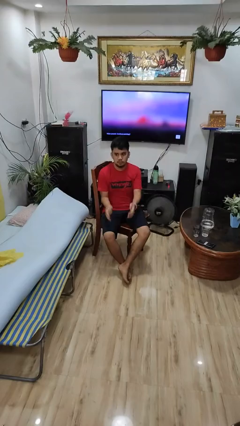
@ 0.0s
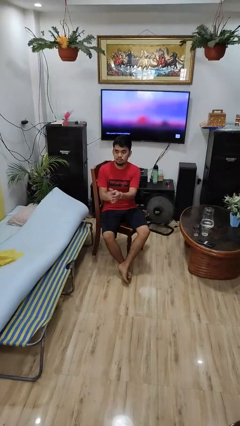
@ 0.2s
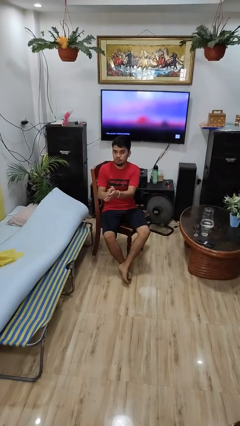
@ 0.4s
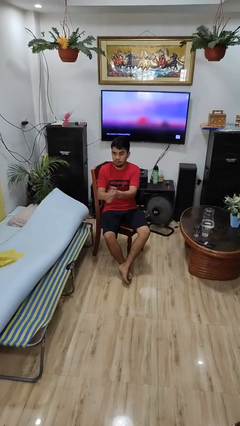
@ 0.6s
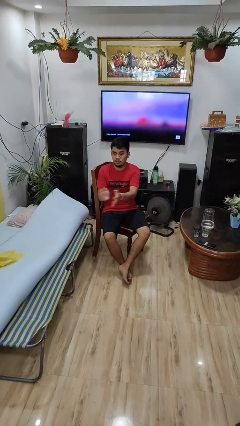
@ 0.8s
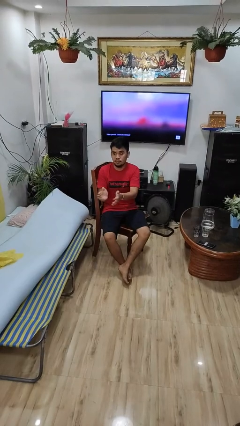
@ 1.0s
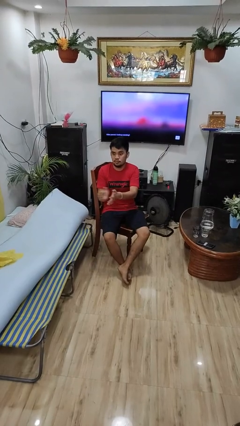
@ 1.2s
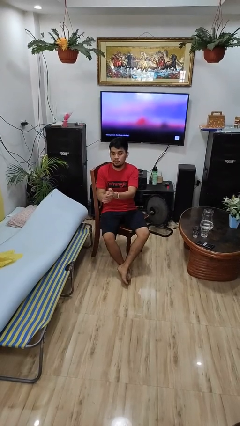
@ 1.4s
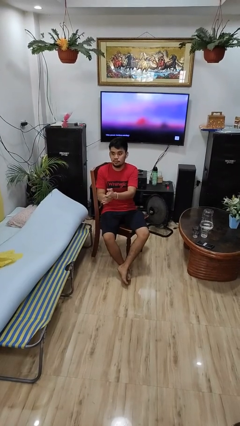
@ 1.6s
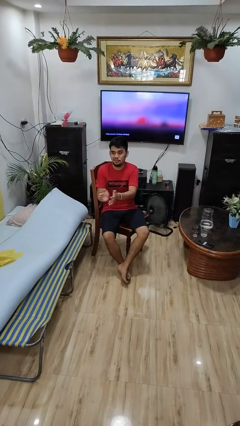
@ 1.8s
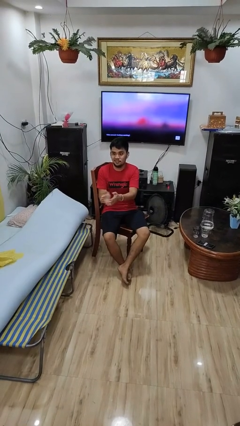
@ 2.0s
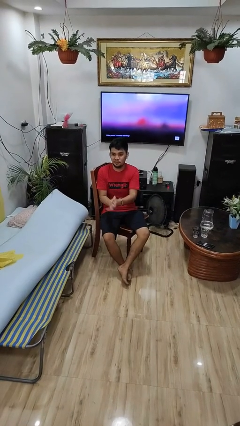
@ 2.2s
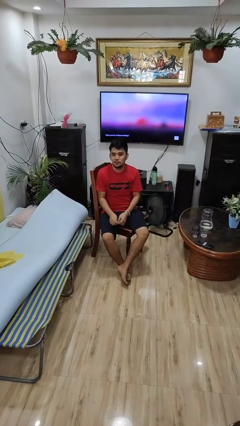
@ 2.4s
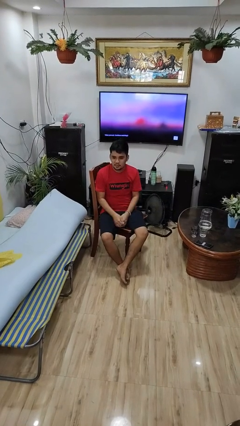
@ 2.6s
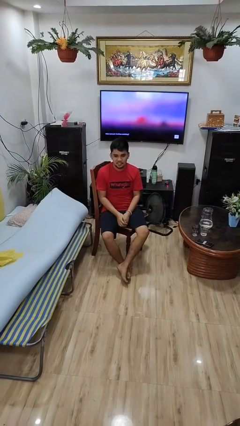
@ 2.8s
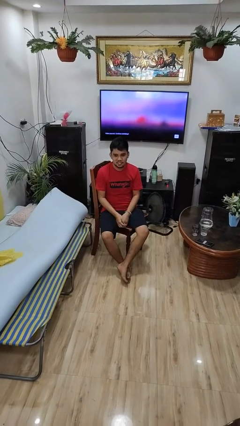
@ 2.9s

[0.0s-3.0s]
person claps hands

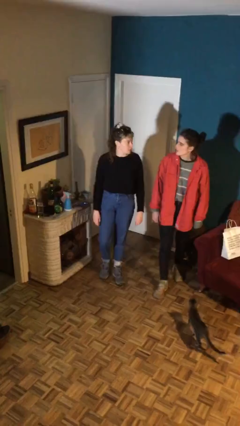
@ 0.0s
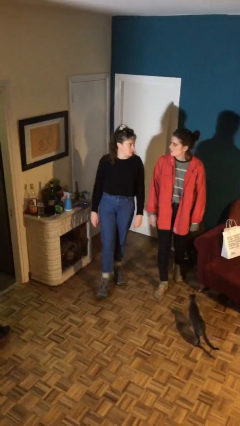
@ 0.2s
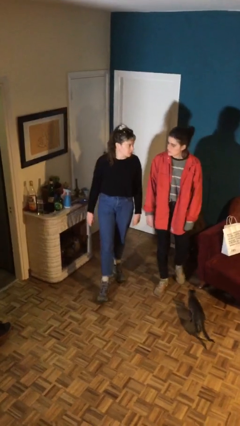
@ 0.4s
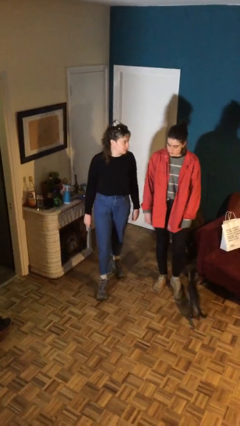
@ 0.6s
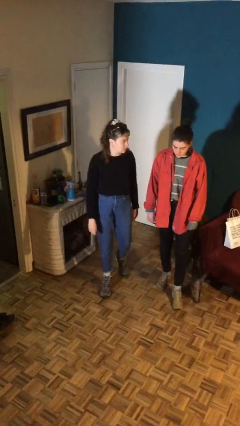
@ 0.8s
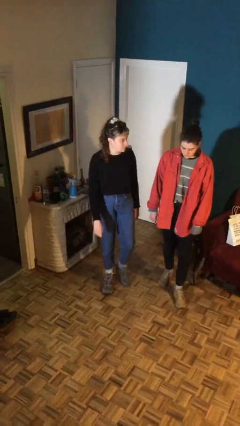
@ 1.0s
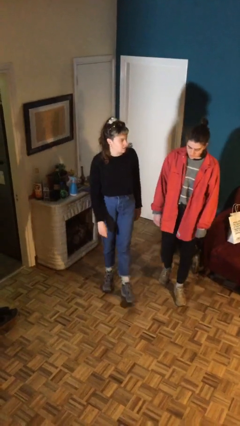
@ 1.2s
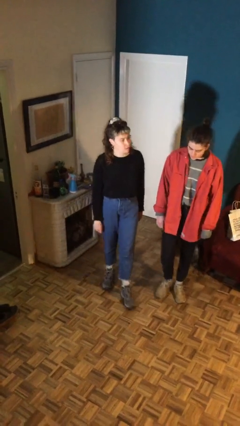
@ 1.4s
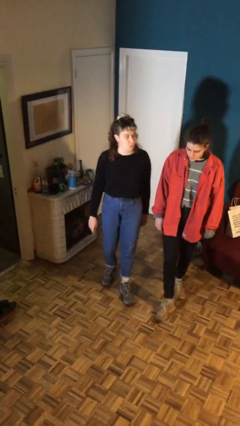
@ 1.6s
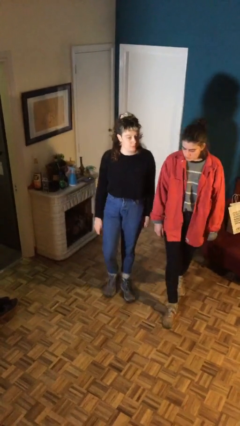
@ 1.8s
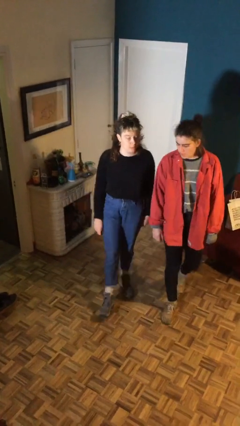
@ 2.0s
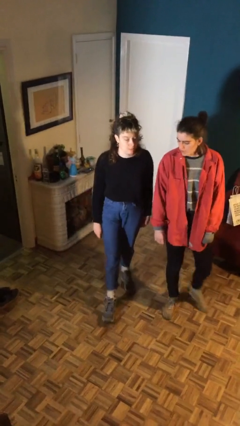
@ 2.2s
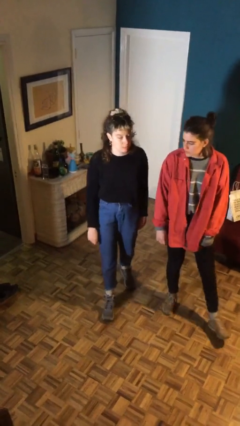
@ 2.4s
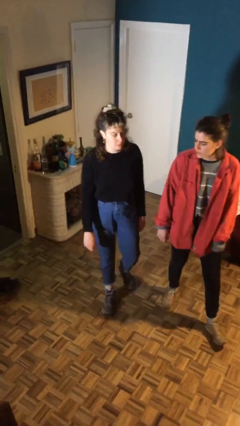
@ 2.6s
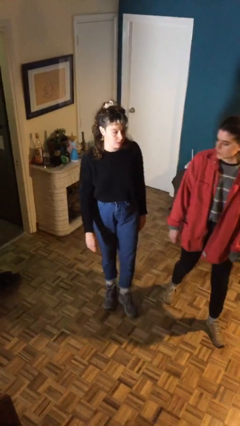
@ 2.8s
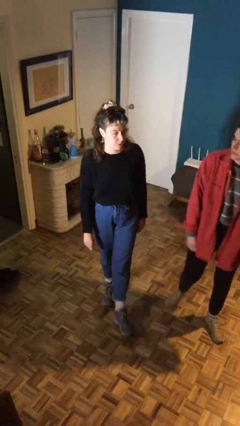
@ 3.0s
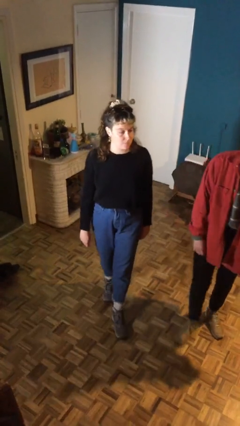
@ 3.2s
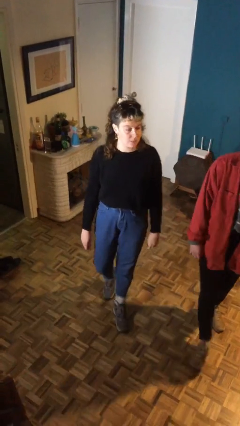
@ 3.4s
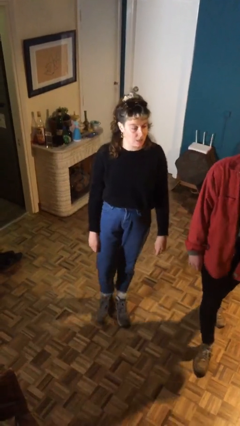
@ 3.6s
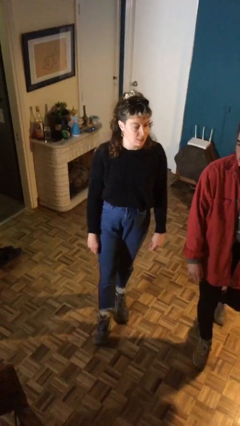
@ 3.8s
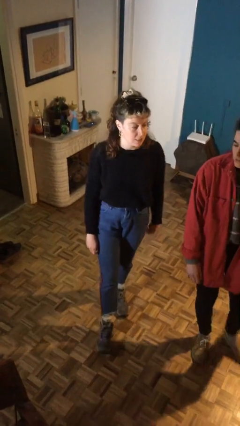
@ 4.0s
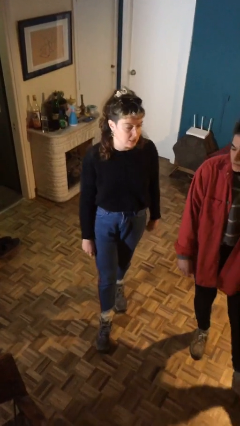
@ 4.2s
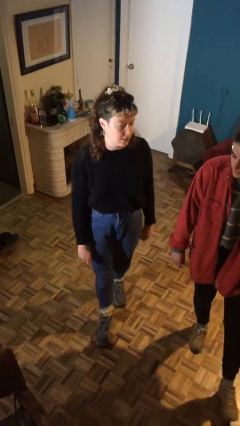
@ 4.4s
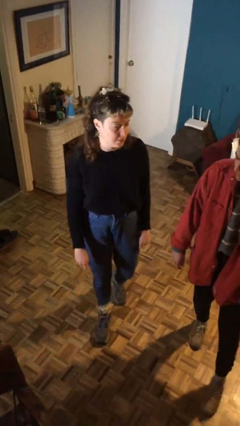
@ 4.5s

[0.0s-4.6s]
person talks to person

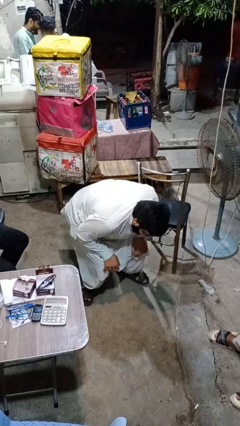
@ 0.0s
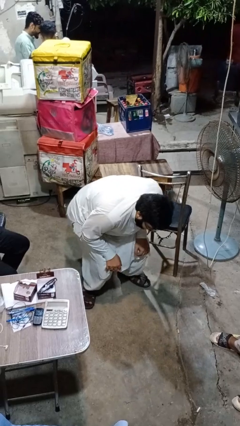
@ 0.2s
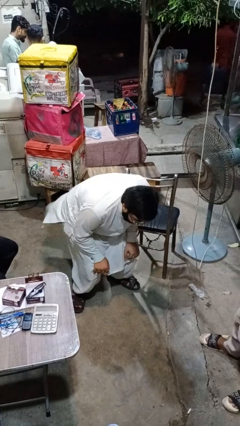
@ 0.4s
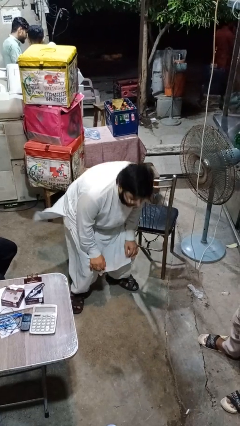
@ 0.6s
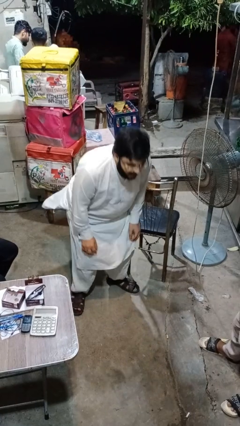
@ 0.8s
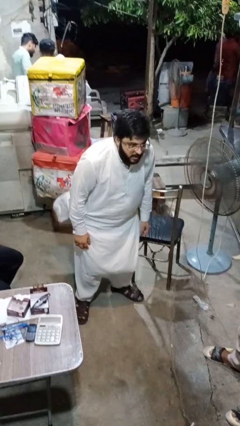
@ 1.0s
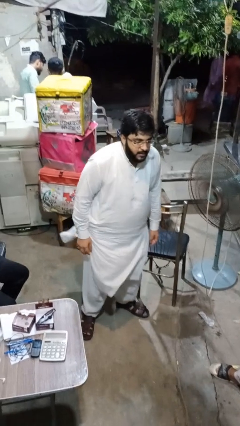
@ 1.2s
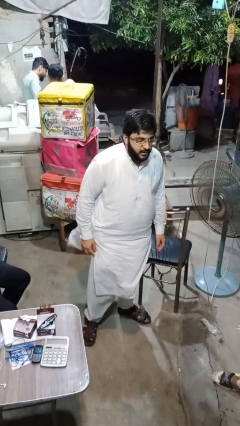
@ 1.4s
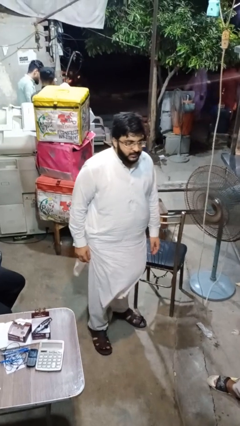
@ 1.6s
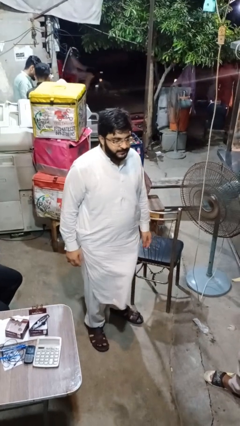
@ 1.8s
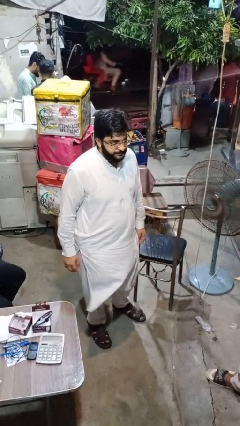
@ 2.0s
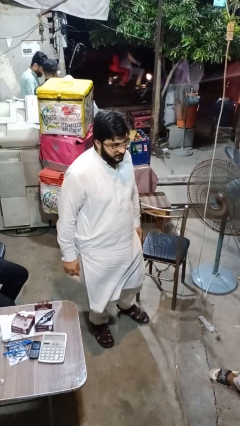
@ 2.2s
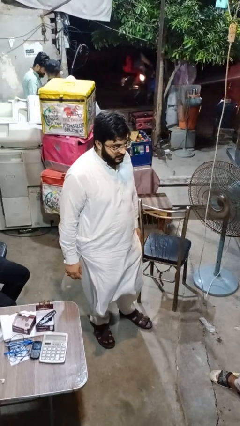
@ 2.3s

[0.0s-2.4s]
person stands up from floor

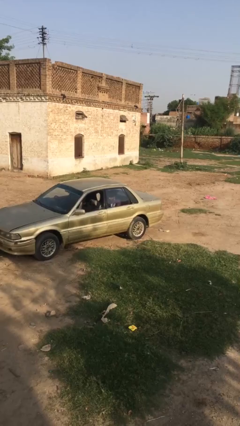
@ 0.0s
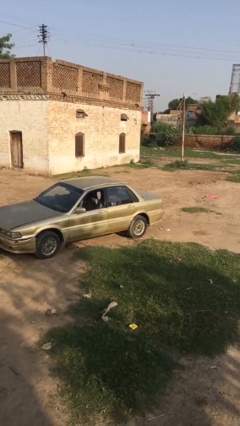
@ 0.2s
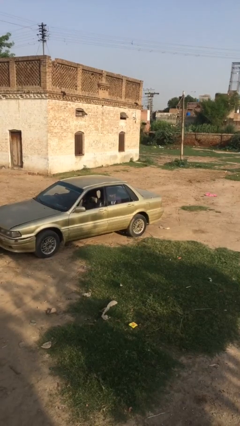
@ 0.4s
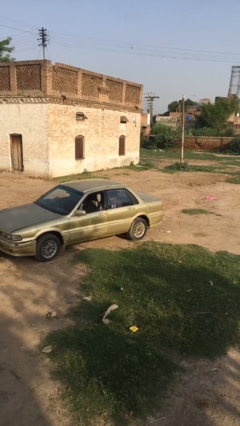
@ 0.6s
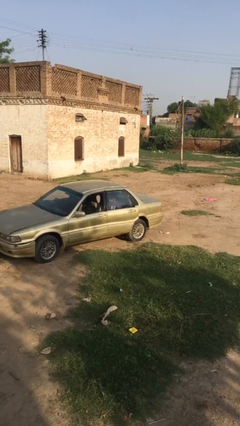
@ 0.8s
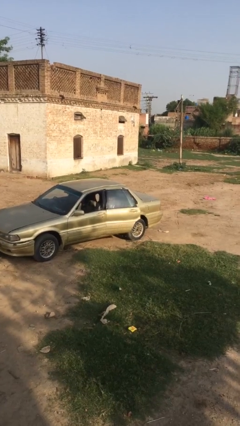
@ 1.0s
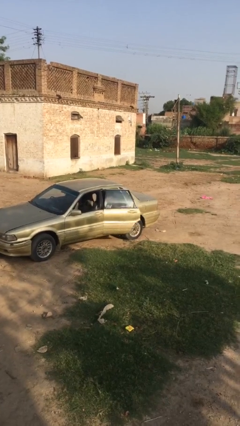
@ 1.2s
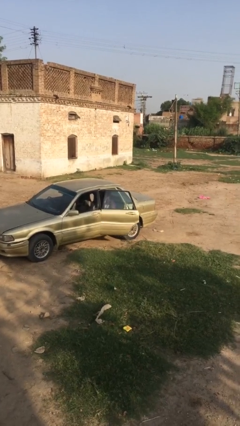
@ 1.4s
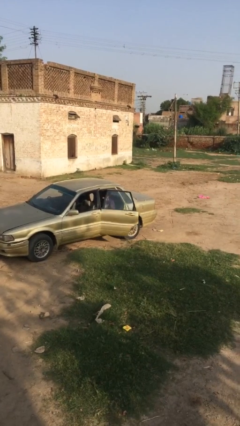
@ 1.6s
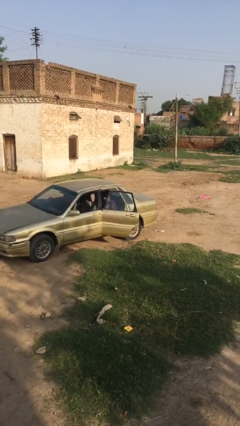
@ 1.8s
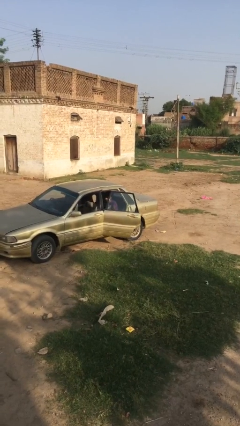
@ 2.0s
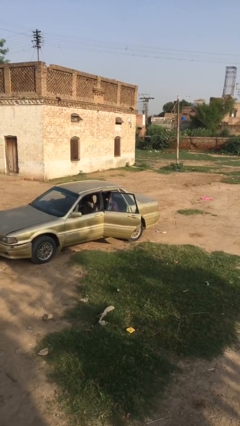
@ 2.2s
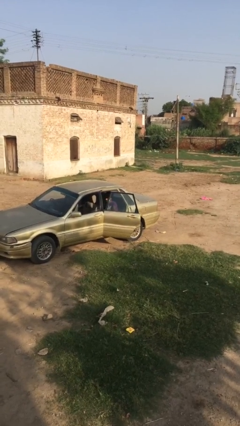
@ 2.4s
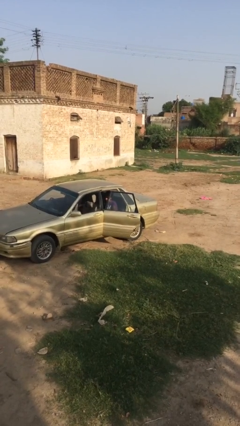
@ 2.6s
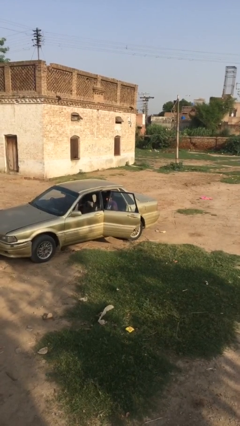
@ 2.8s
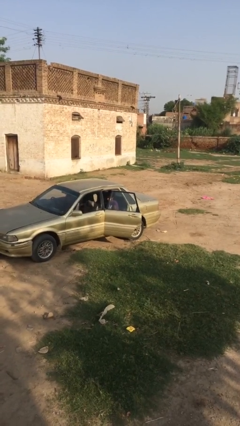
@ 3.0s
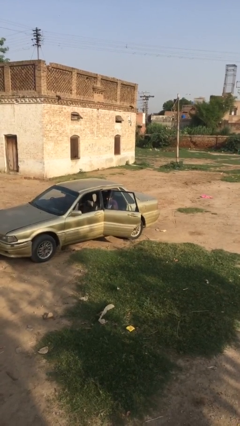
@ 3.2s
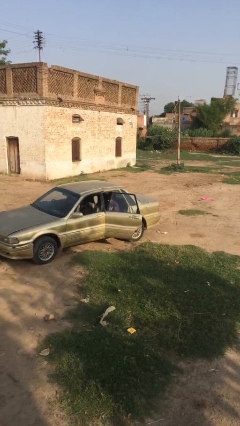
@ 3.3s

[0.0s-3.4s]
person opens car door

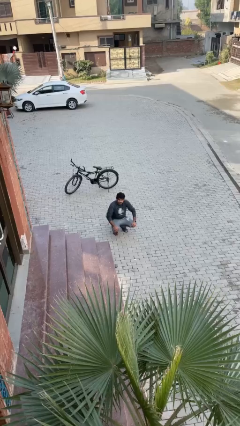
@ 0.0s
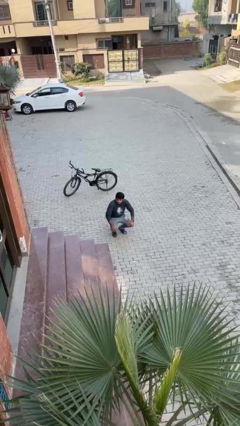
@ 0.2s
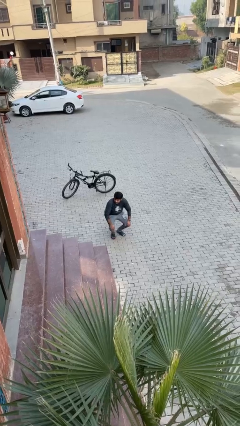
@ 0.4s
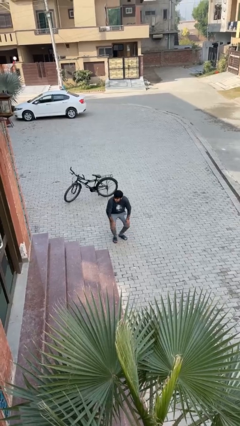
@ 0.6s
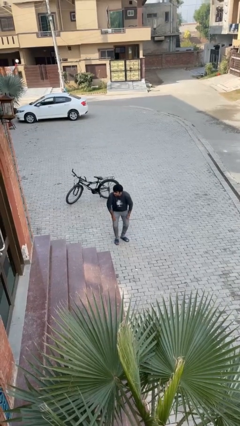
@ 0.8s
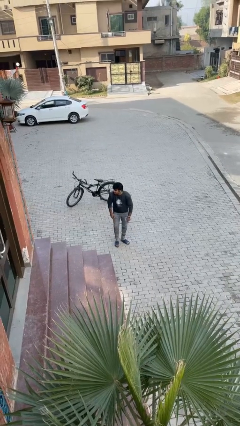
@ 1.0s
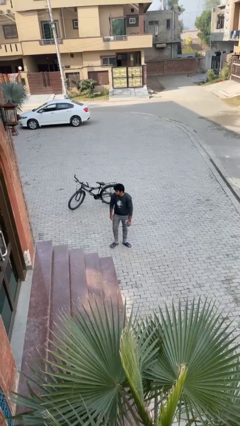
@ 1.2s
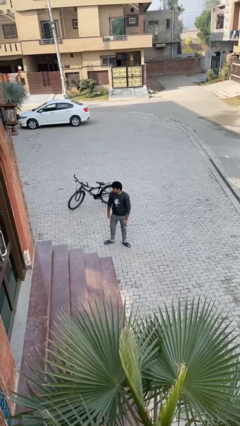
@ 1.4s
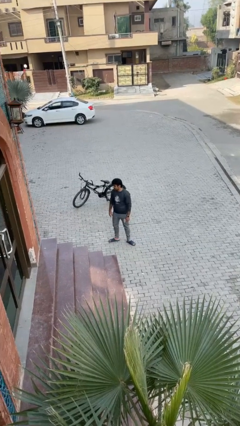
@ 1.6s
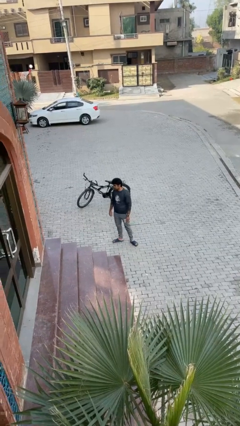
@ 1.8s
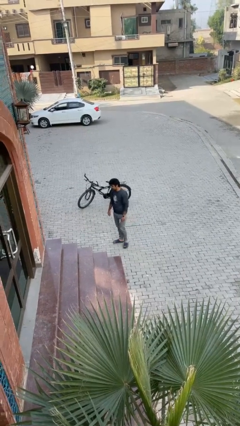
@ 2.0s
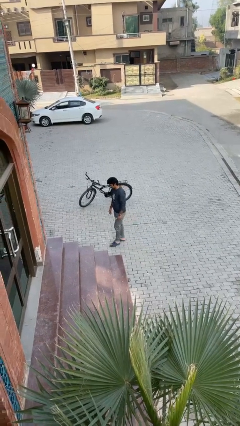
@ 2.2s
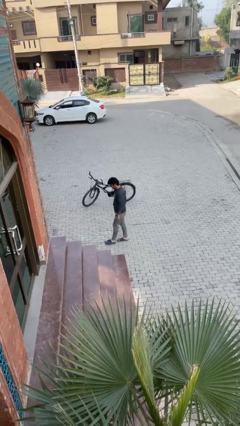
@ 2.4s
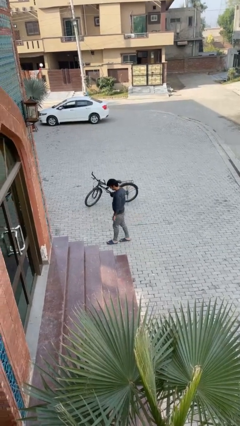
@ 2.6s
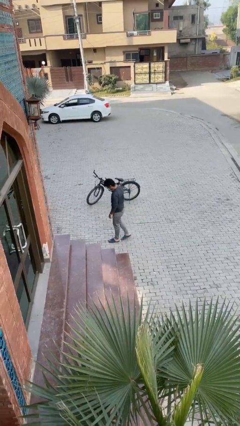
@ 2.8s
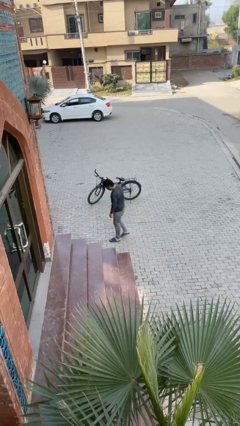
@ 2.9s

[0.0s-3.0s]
person stands up

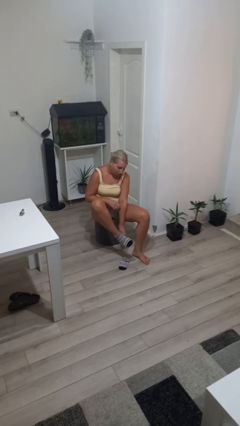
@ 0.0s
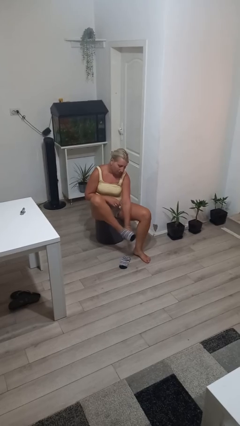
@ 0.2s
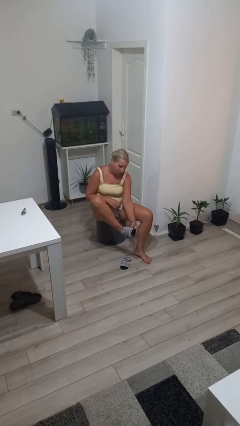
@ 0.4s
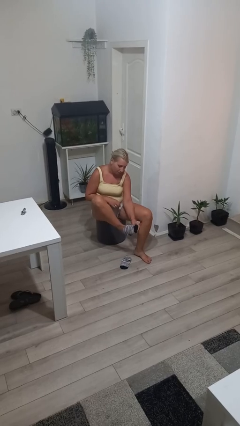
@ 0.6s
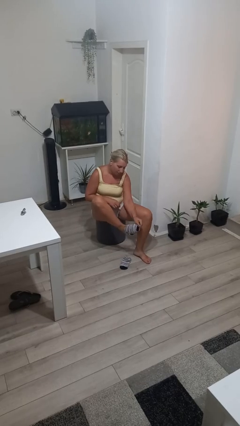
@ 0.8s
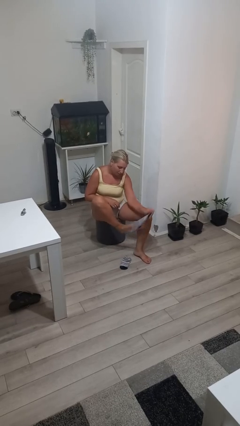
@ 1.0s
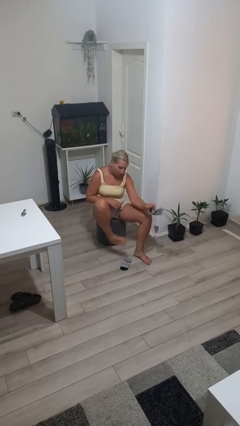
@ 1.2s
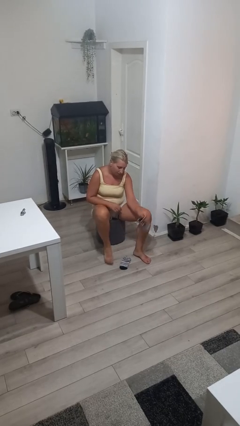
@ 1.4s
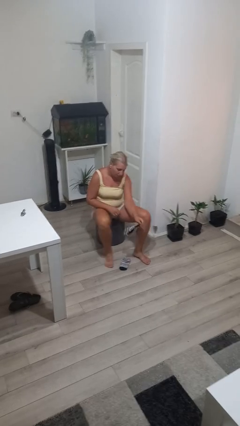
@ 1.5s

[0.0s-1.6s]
person takes off socks
